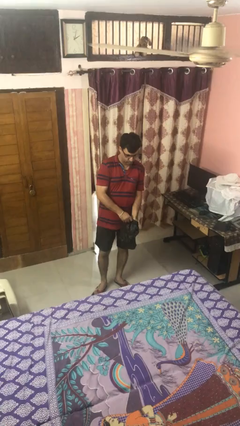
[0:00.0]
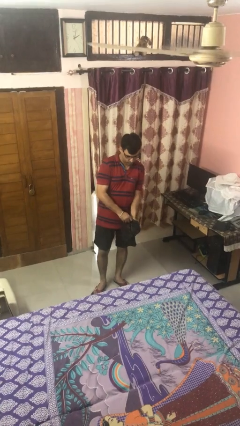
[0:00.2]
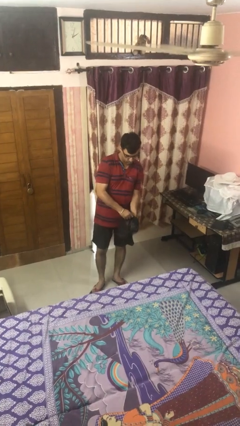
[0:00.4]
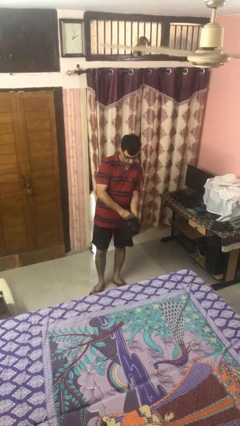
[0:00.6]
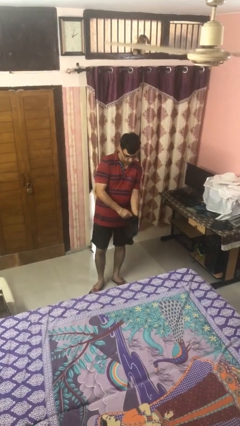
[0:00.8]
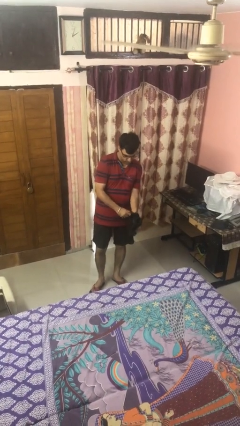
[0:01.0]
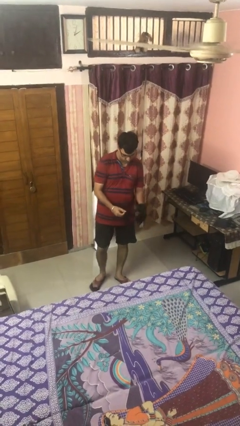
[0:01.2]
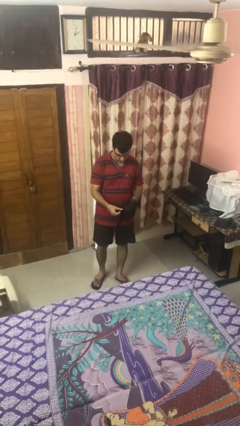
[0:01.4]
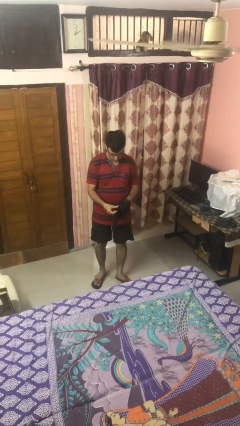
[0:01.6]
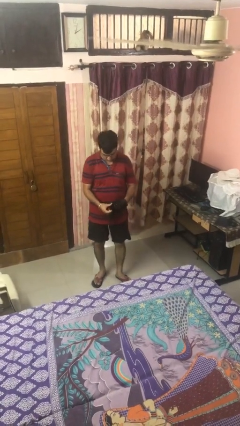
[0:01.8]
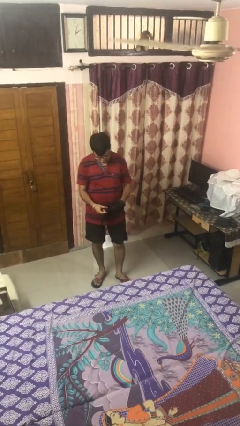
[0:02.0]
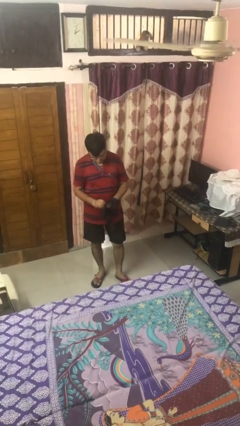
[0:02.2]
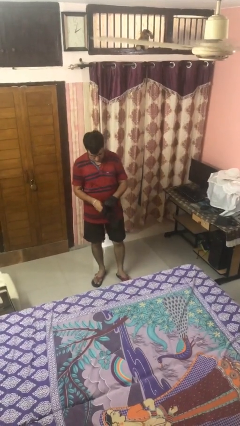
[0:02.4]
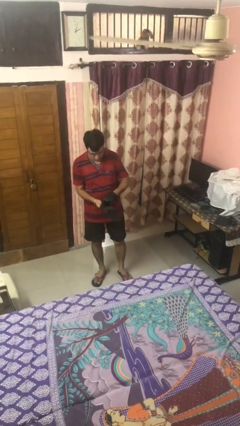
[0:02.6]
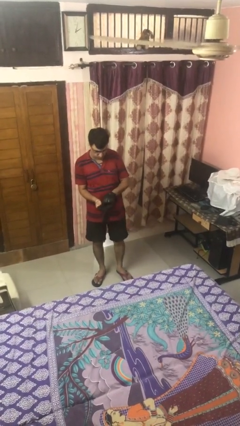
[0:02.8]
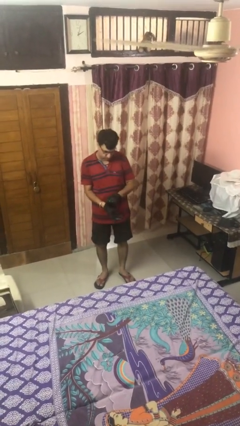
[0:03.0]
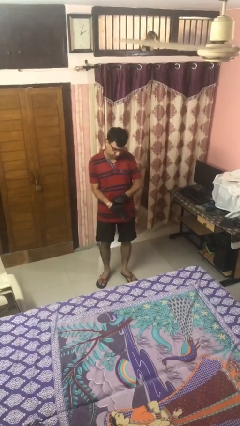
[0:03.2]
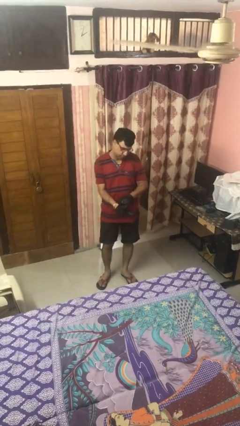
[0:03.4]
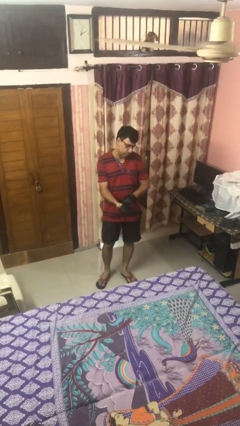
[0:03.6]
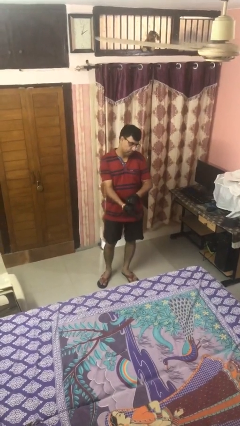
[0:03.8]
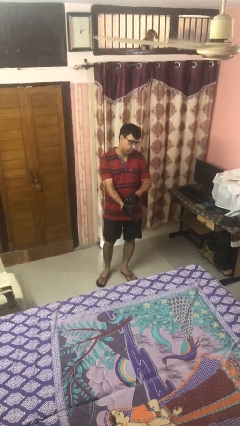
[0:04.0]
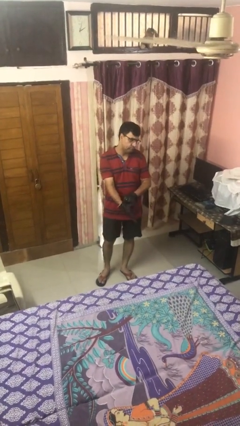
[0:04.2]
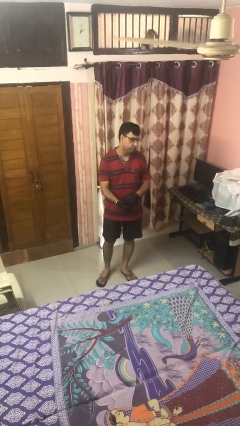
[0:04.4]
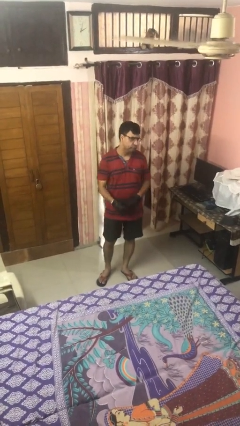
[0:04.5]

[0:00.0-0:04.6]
person puts on gloves

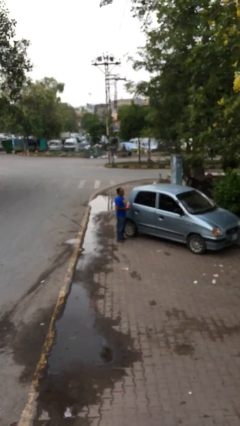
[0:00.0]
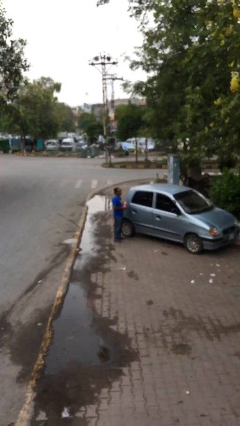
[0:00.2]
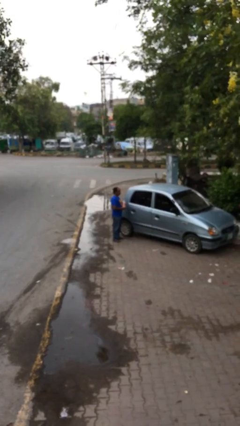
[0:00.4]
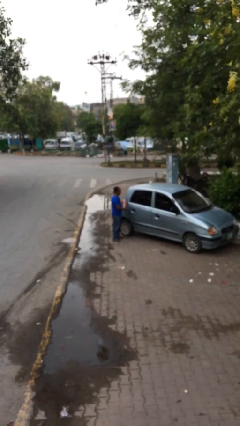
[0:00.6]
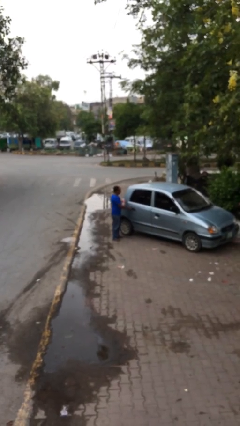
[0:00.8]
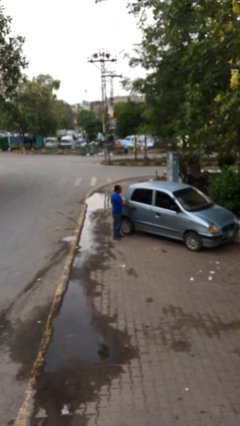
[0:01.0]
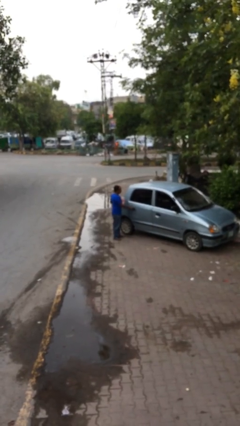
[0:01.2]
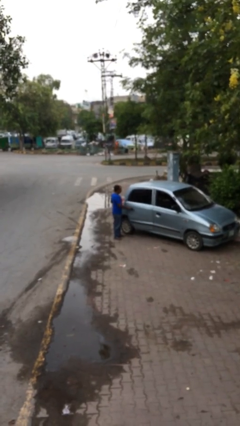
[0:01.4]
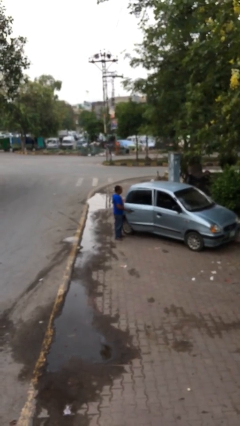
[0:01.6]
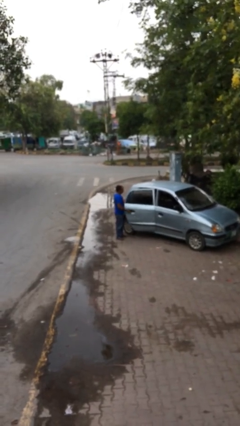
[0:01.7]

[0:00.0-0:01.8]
person opens car door

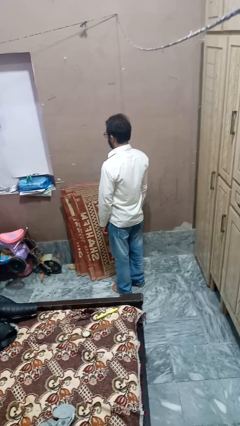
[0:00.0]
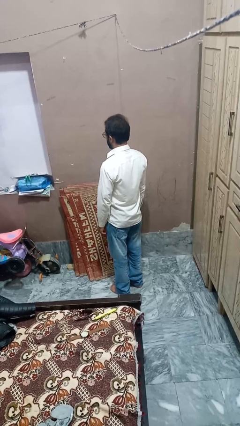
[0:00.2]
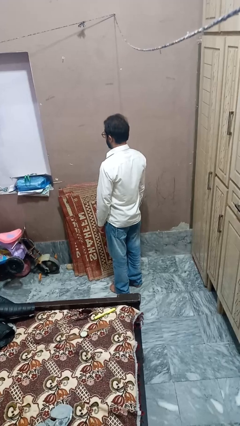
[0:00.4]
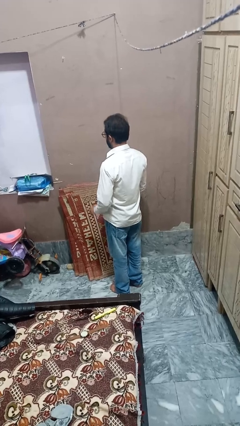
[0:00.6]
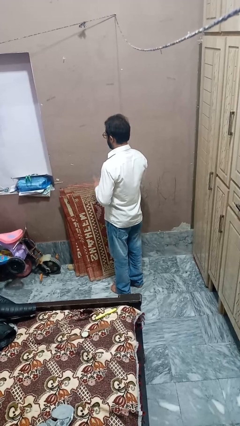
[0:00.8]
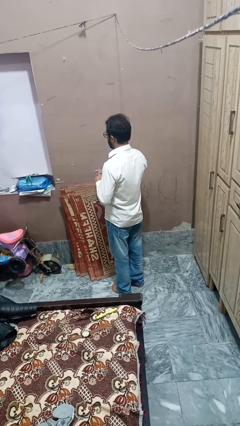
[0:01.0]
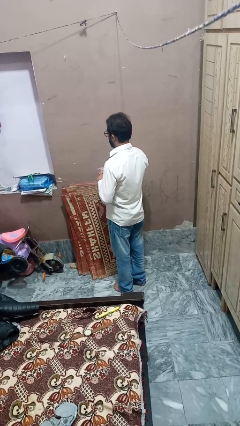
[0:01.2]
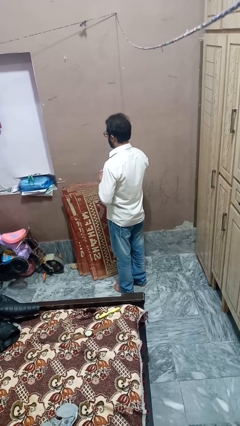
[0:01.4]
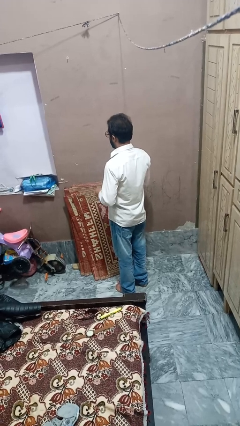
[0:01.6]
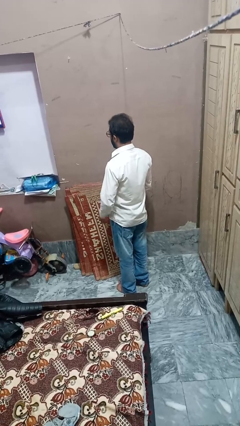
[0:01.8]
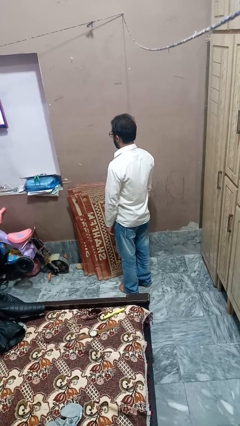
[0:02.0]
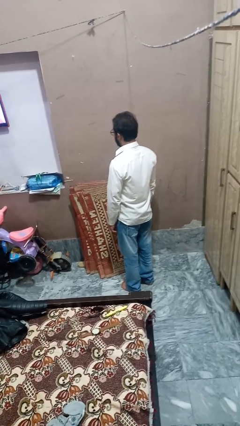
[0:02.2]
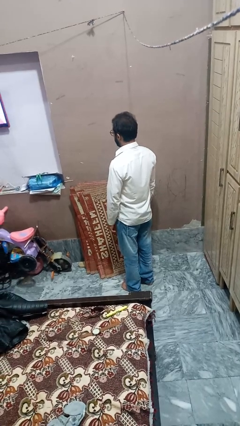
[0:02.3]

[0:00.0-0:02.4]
person takes off ring

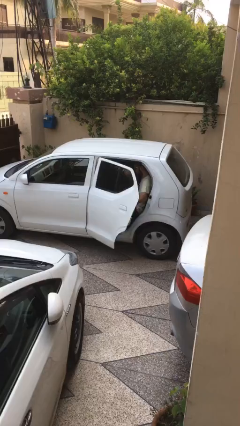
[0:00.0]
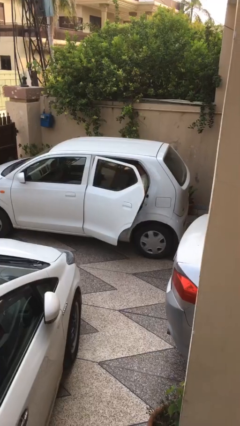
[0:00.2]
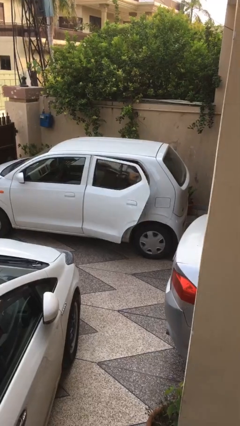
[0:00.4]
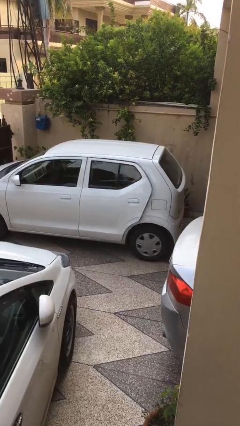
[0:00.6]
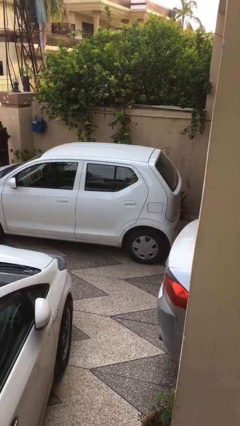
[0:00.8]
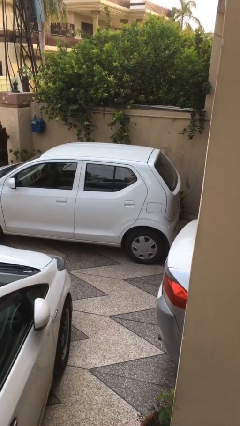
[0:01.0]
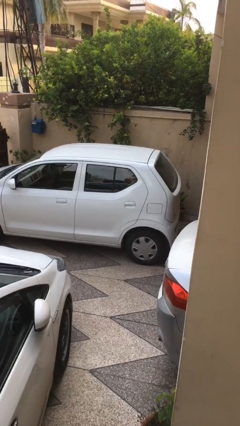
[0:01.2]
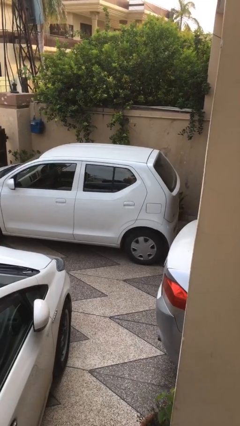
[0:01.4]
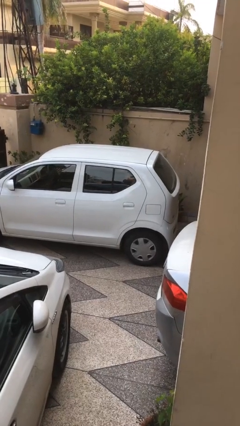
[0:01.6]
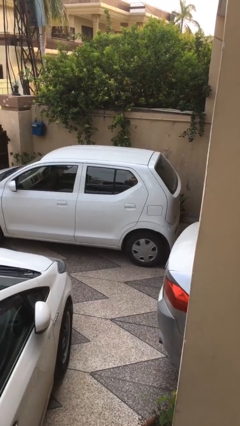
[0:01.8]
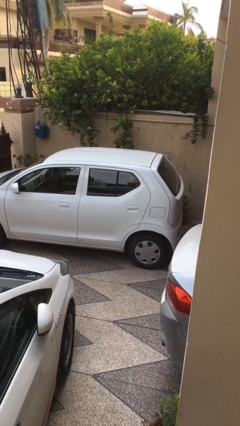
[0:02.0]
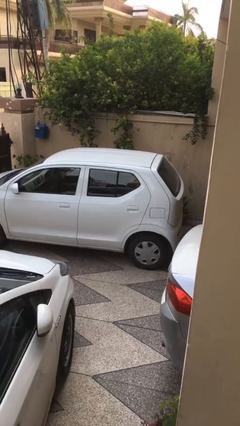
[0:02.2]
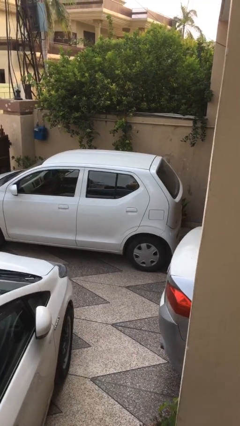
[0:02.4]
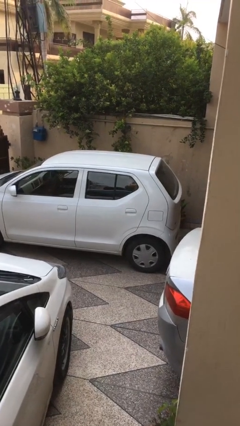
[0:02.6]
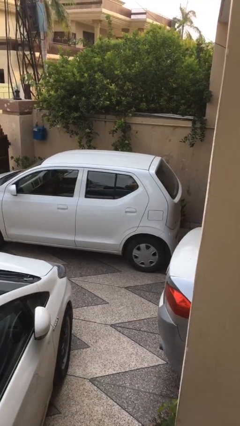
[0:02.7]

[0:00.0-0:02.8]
person closes car door

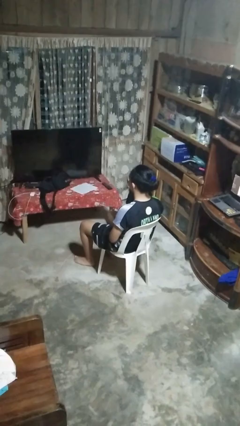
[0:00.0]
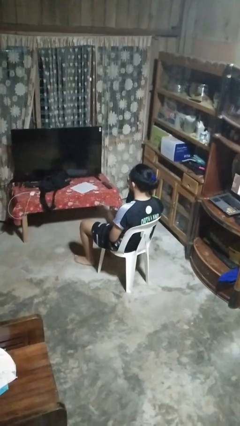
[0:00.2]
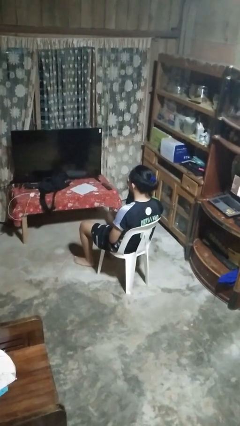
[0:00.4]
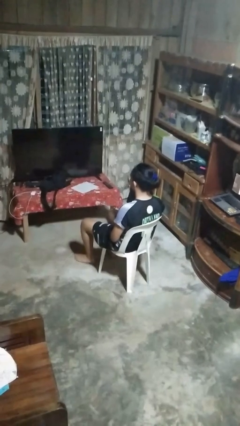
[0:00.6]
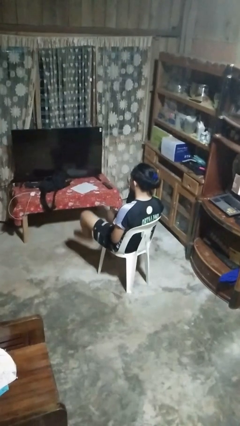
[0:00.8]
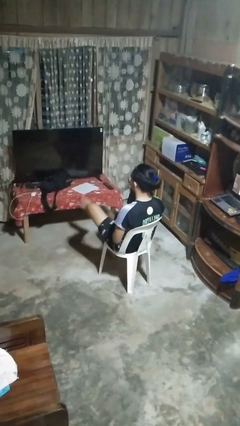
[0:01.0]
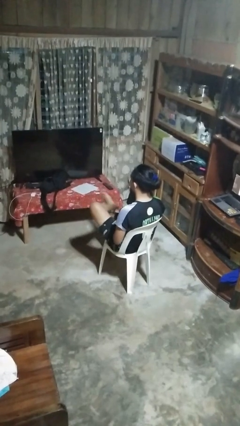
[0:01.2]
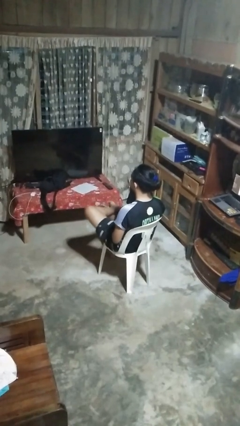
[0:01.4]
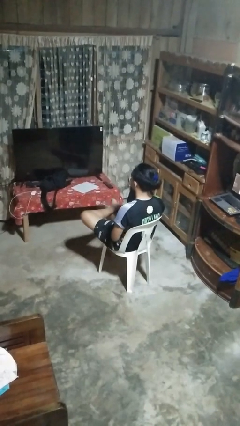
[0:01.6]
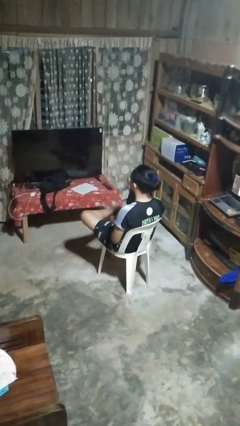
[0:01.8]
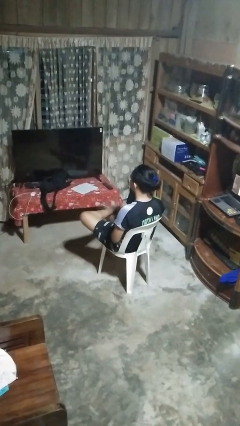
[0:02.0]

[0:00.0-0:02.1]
person crosses legs

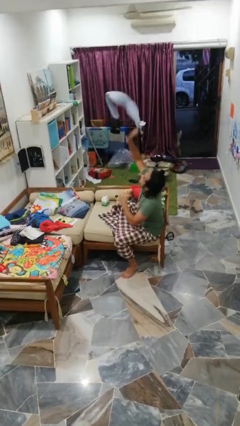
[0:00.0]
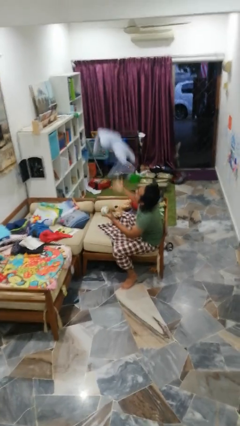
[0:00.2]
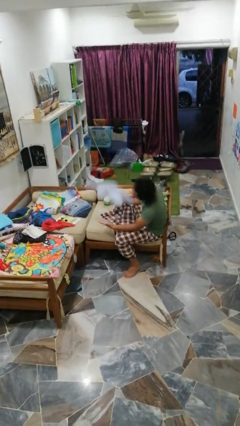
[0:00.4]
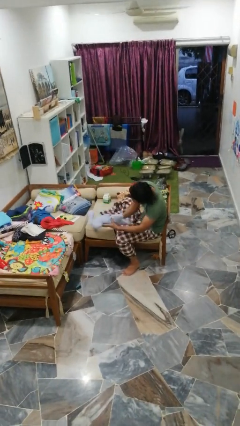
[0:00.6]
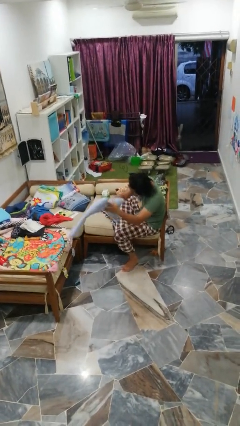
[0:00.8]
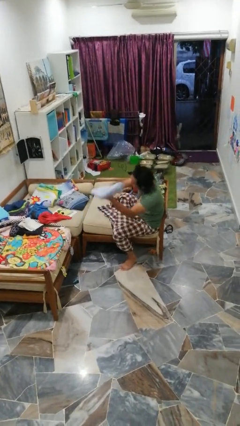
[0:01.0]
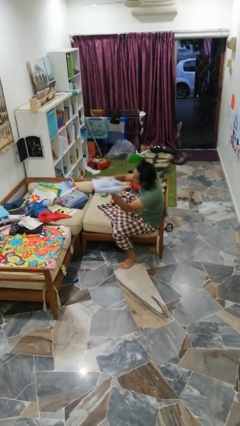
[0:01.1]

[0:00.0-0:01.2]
person catches dropped object

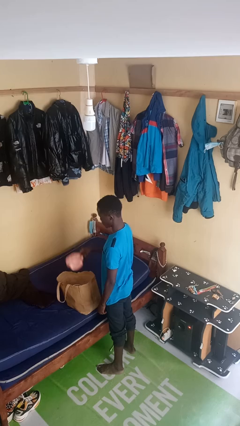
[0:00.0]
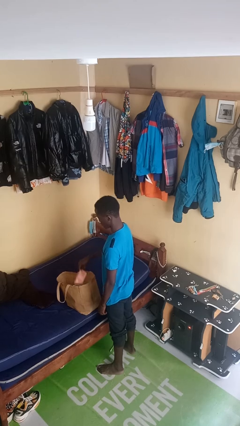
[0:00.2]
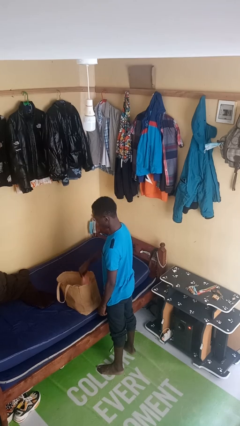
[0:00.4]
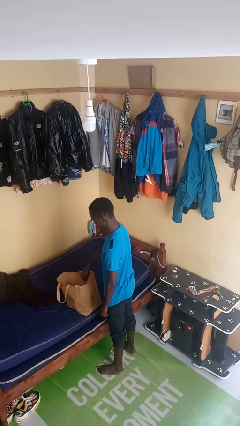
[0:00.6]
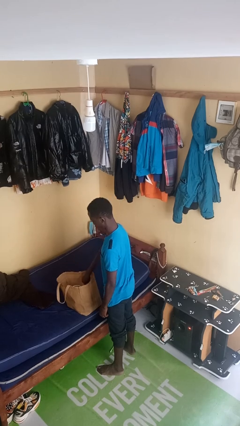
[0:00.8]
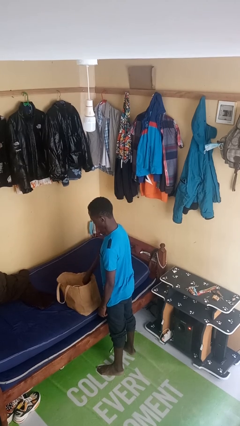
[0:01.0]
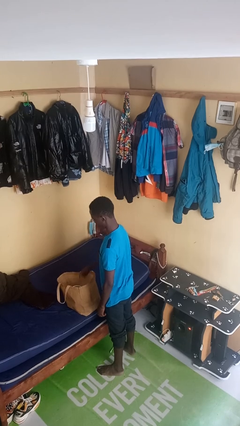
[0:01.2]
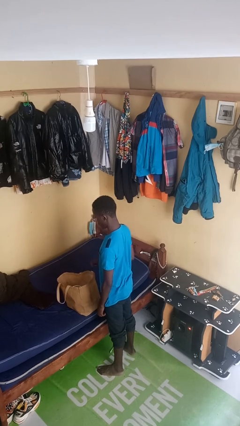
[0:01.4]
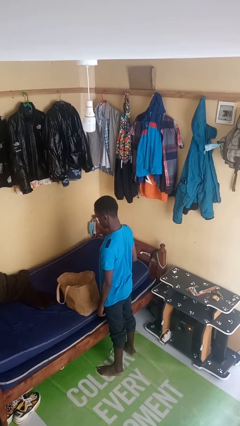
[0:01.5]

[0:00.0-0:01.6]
person puts object into bag

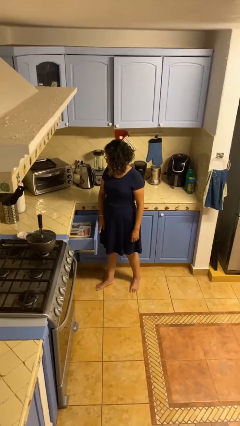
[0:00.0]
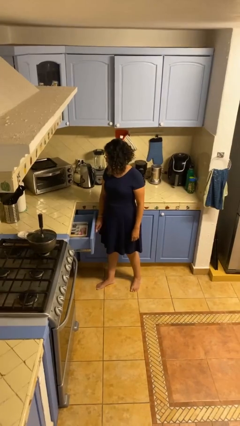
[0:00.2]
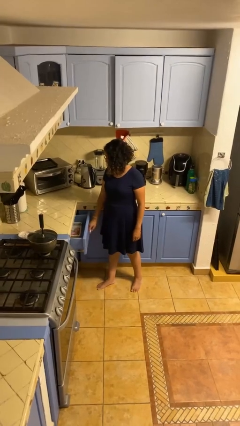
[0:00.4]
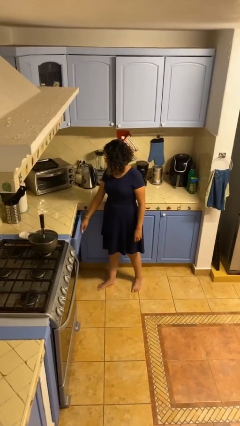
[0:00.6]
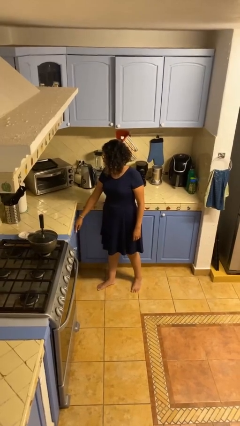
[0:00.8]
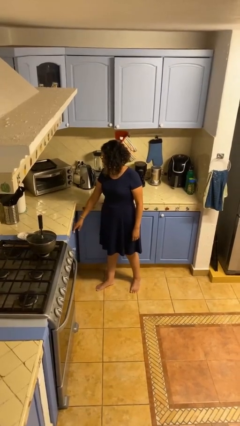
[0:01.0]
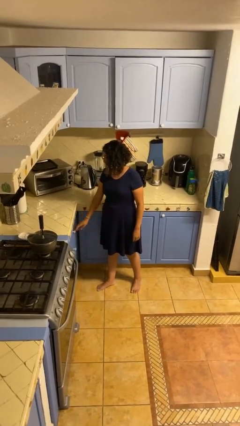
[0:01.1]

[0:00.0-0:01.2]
person closes kitchen drawer
